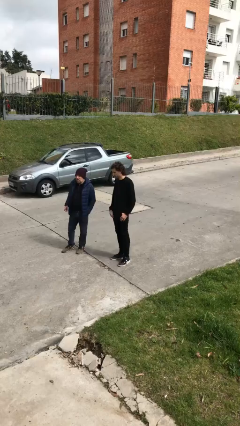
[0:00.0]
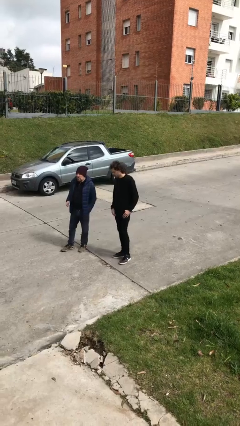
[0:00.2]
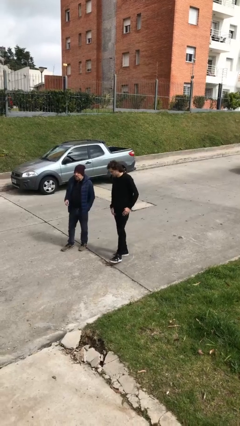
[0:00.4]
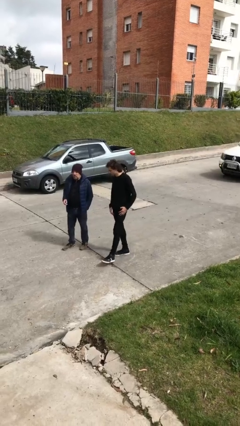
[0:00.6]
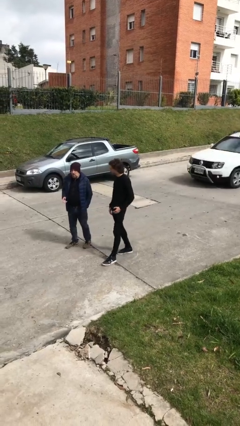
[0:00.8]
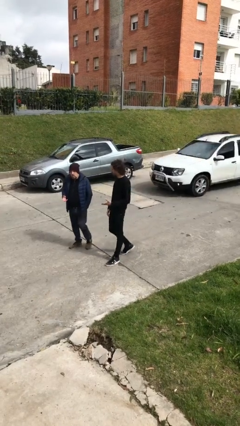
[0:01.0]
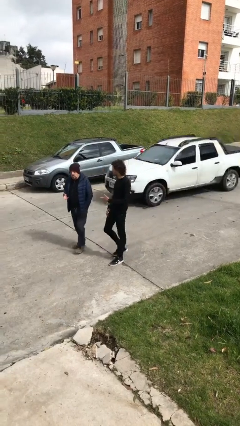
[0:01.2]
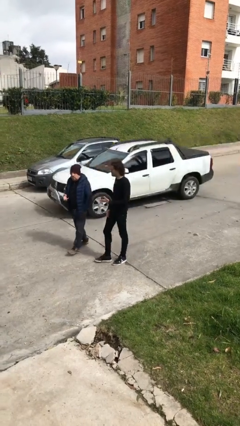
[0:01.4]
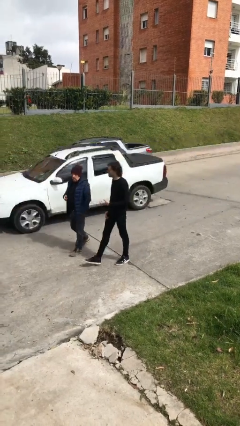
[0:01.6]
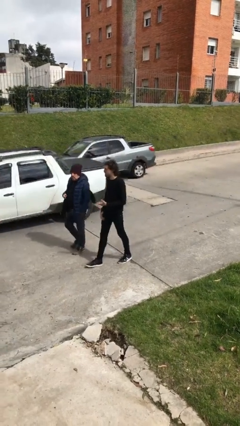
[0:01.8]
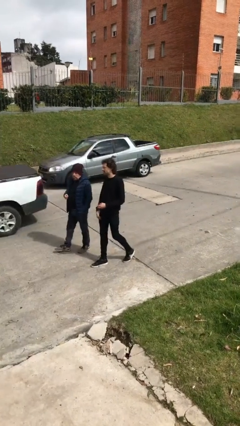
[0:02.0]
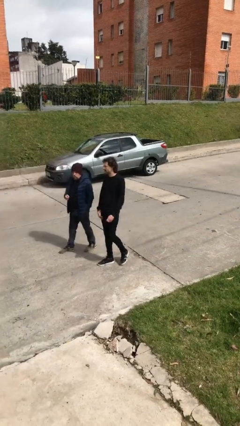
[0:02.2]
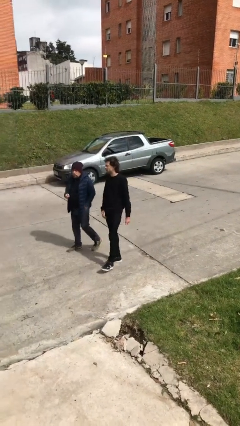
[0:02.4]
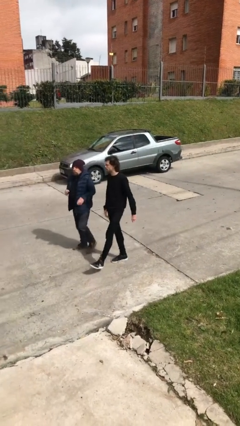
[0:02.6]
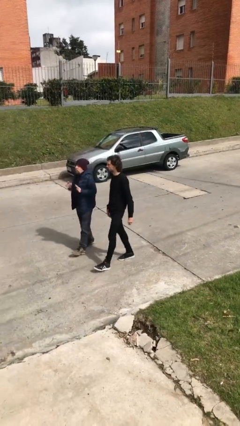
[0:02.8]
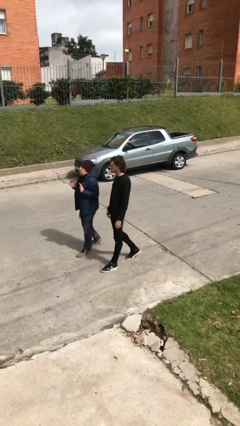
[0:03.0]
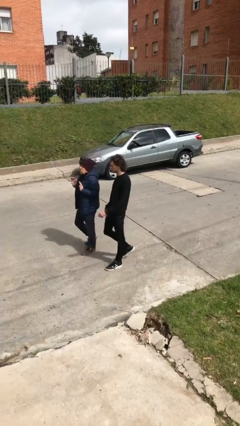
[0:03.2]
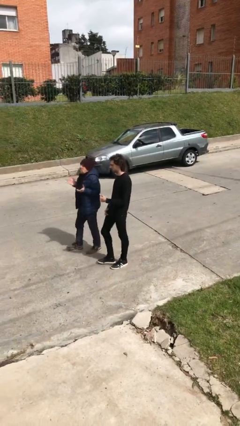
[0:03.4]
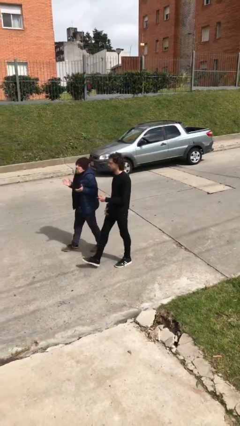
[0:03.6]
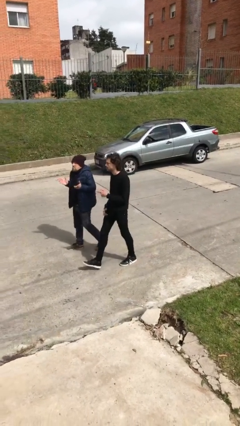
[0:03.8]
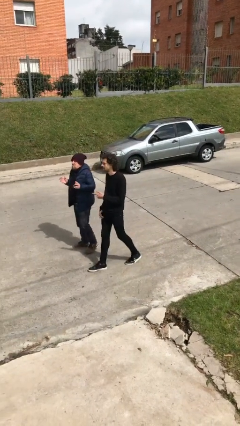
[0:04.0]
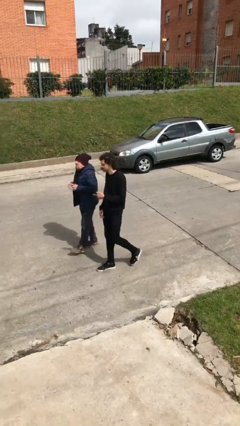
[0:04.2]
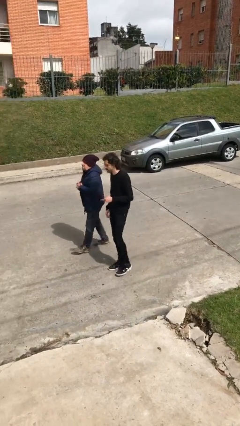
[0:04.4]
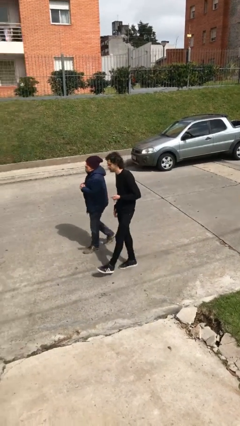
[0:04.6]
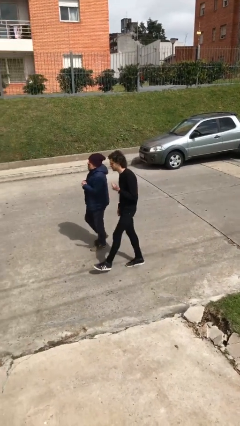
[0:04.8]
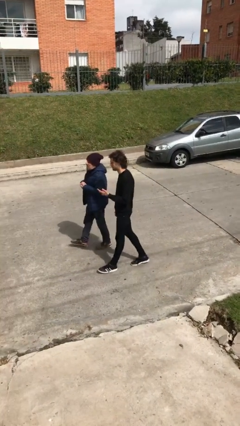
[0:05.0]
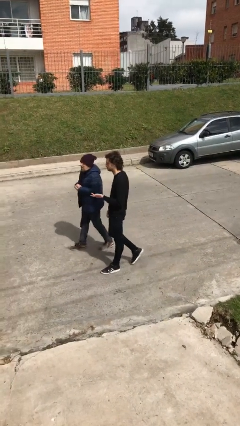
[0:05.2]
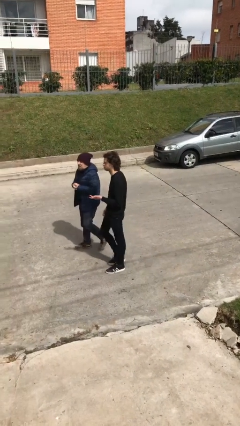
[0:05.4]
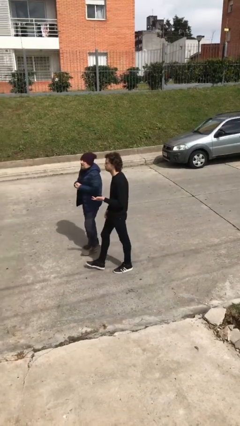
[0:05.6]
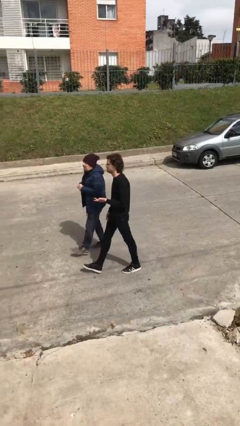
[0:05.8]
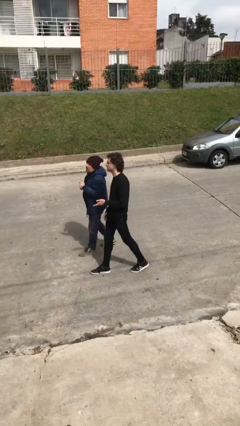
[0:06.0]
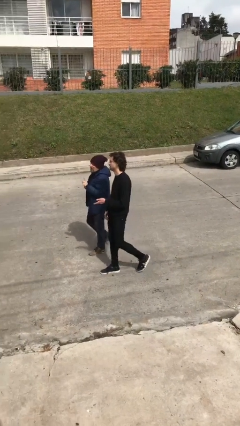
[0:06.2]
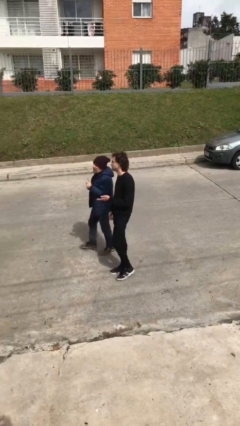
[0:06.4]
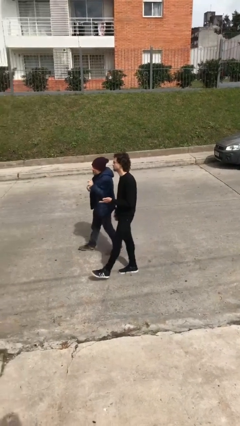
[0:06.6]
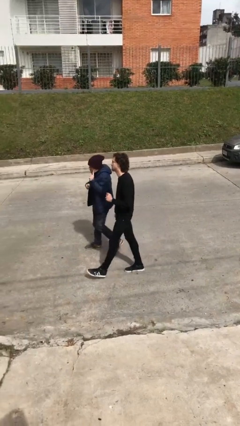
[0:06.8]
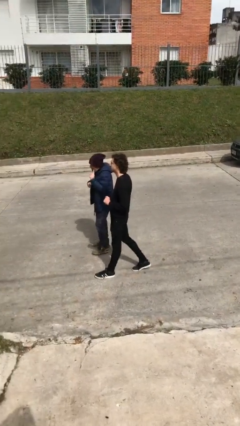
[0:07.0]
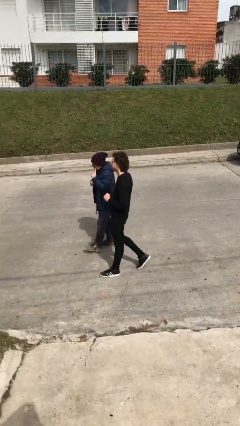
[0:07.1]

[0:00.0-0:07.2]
person talks to person

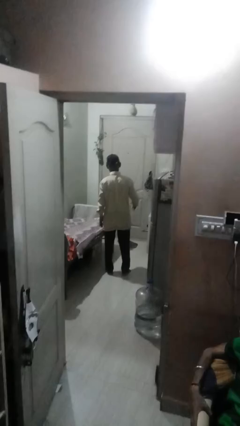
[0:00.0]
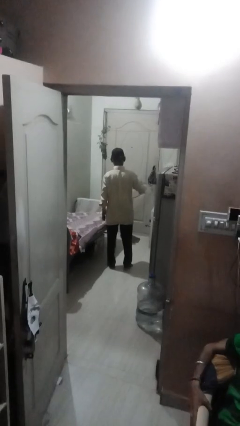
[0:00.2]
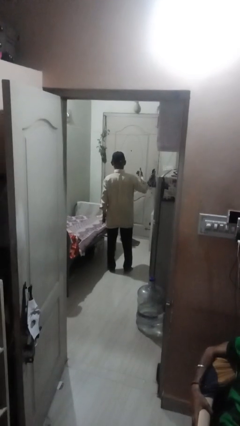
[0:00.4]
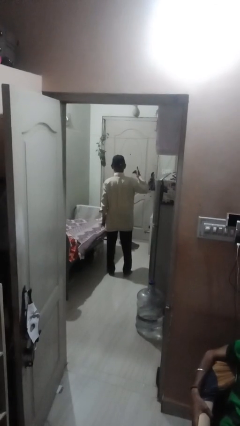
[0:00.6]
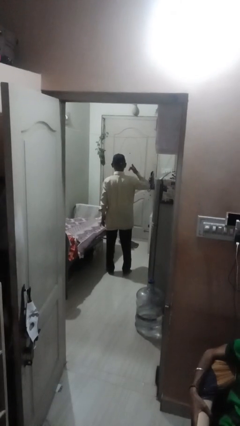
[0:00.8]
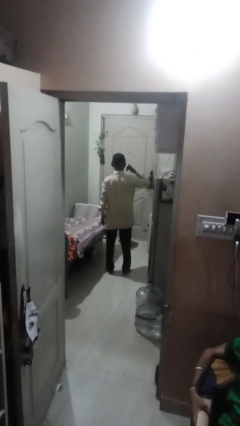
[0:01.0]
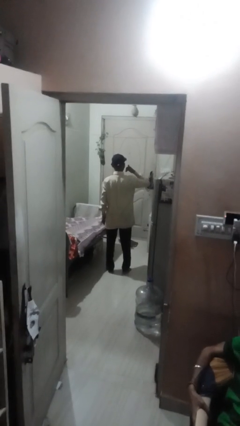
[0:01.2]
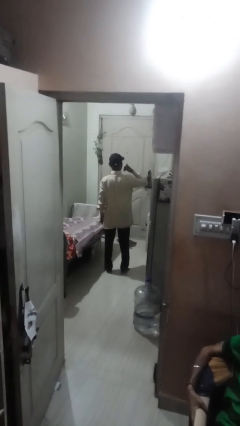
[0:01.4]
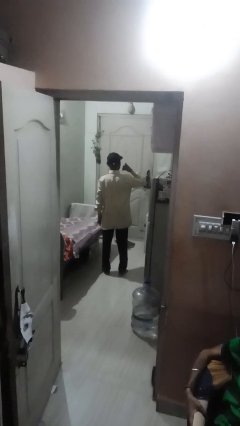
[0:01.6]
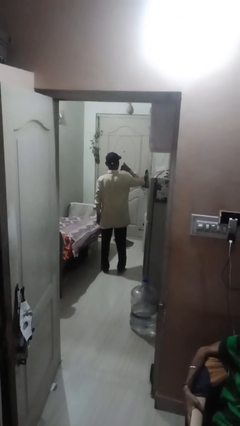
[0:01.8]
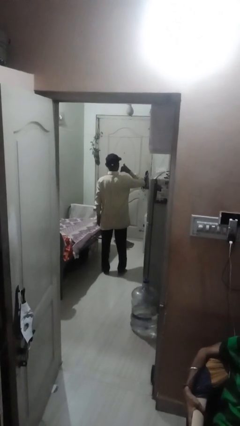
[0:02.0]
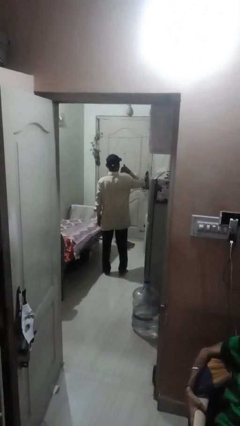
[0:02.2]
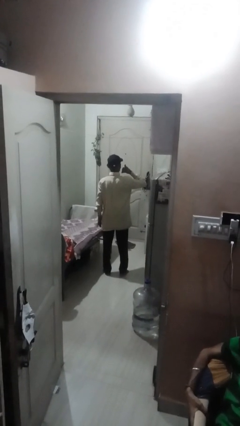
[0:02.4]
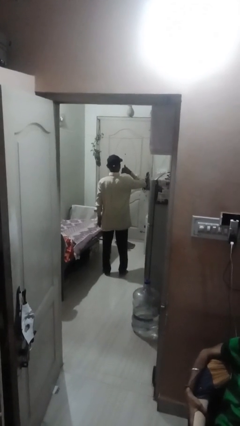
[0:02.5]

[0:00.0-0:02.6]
person gestures call me

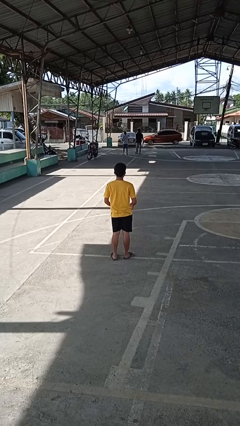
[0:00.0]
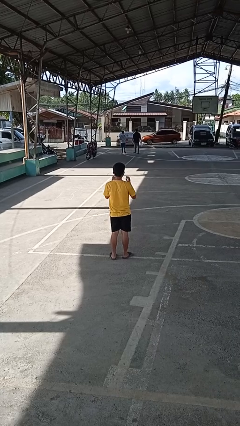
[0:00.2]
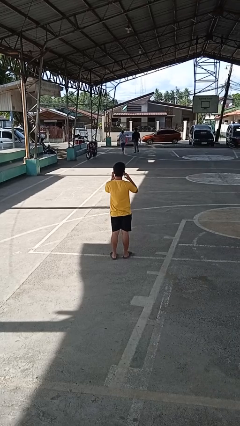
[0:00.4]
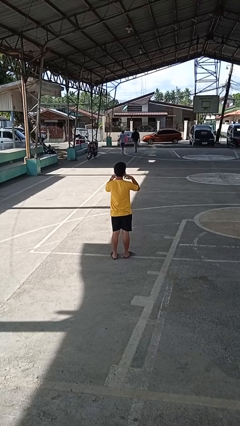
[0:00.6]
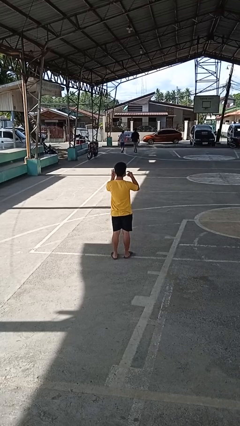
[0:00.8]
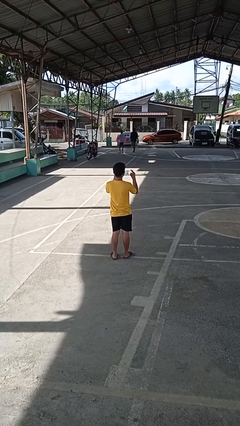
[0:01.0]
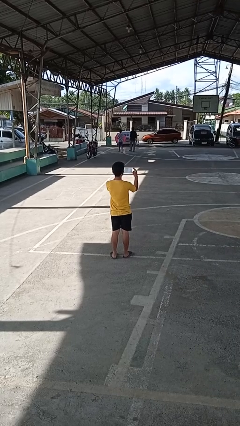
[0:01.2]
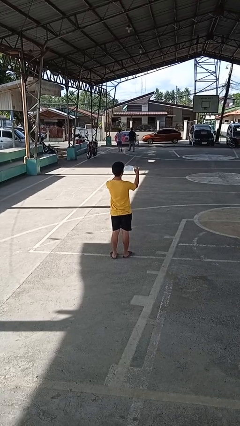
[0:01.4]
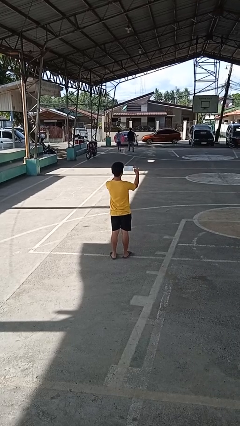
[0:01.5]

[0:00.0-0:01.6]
person takes off facemask

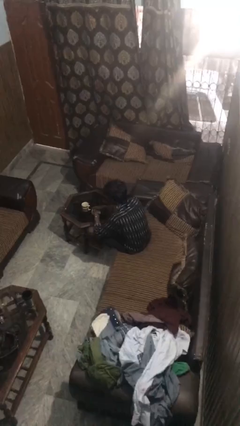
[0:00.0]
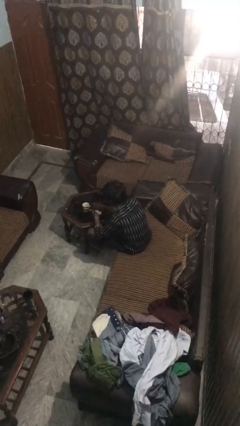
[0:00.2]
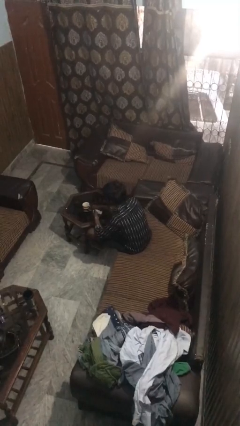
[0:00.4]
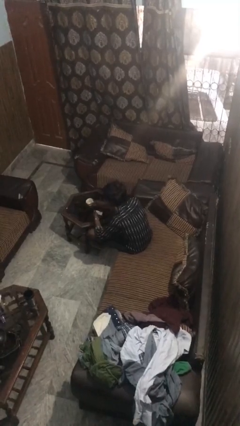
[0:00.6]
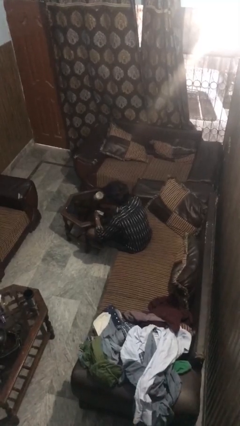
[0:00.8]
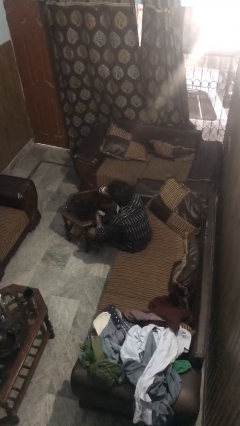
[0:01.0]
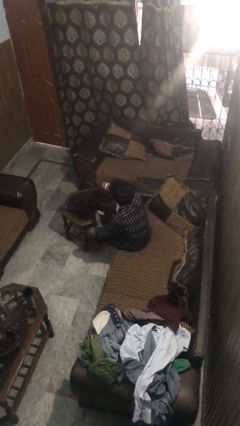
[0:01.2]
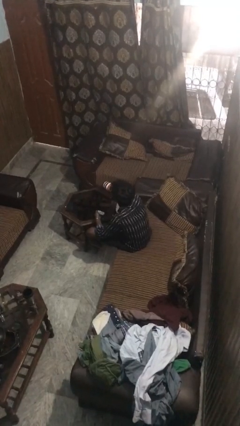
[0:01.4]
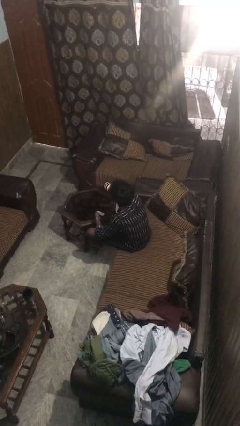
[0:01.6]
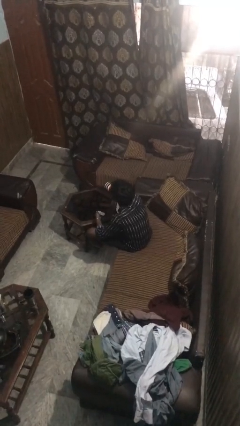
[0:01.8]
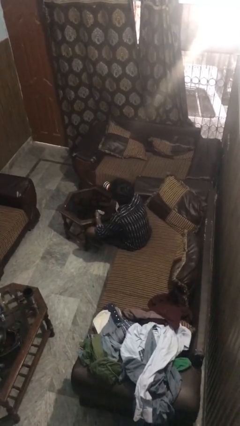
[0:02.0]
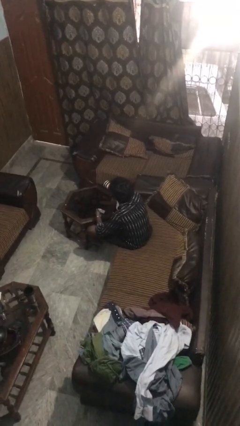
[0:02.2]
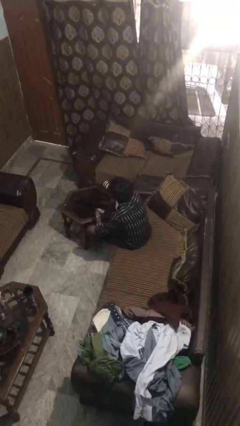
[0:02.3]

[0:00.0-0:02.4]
person drinks from cup

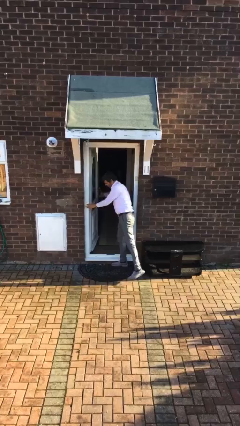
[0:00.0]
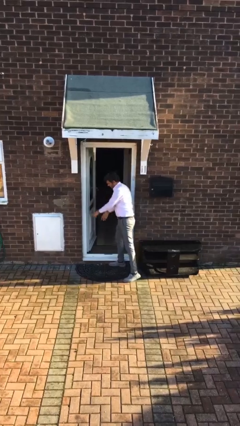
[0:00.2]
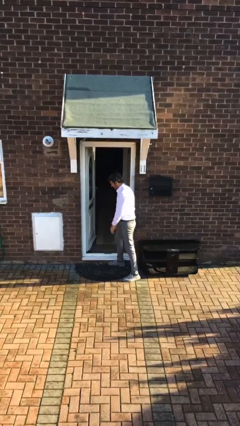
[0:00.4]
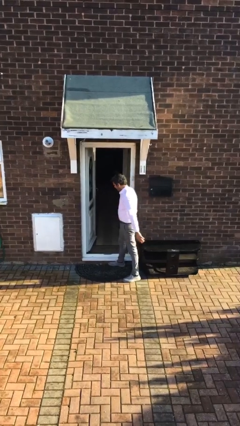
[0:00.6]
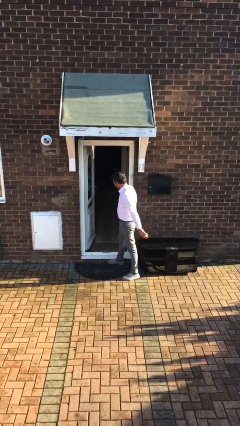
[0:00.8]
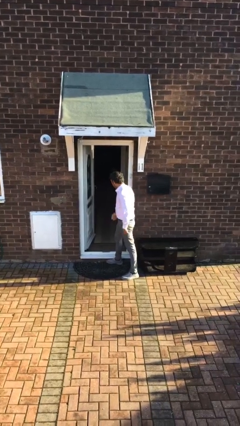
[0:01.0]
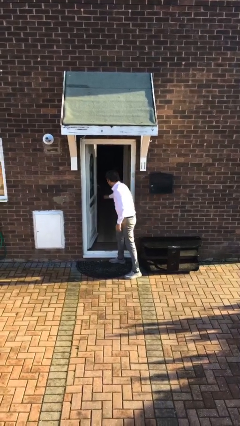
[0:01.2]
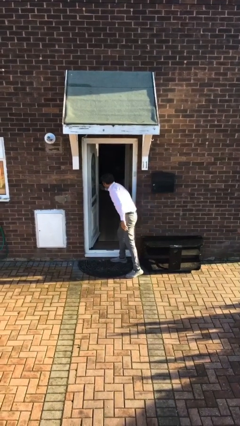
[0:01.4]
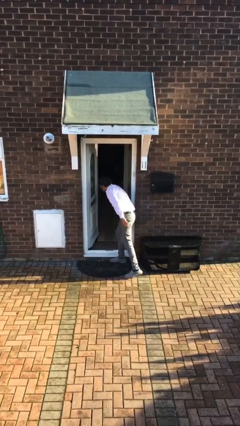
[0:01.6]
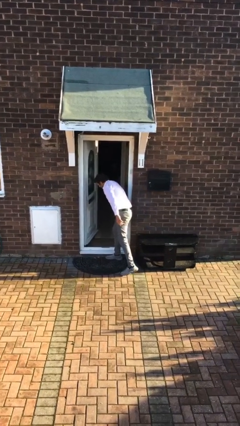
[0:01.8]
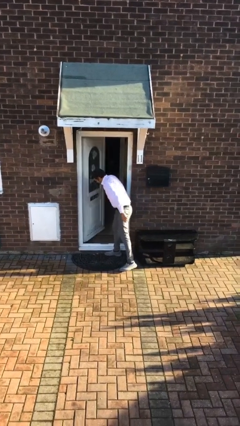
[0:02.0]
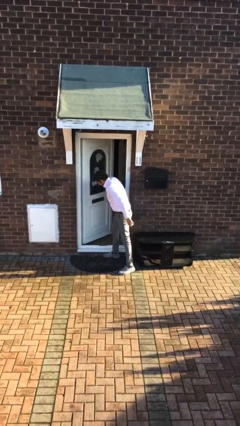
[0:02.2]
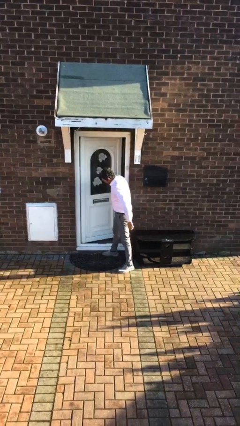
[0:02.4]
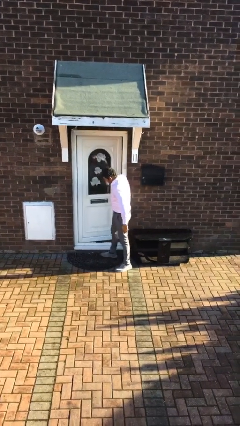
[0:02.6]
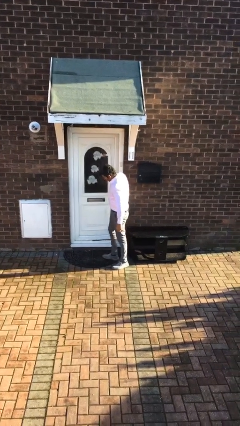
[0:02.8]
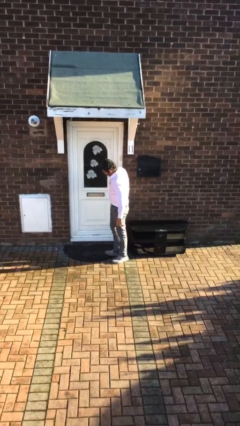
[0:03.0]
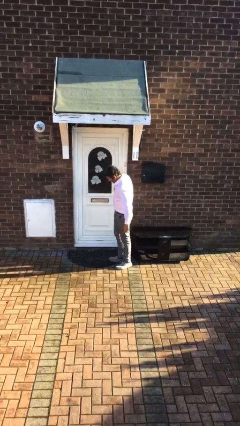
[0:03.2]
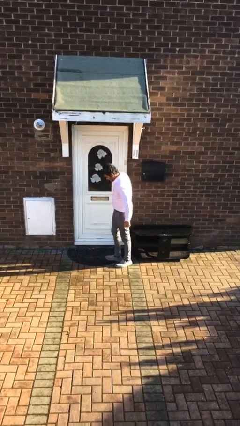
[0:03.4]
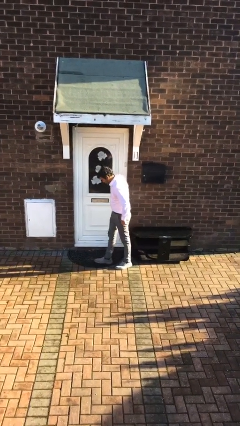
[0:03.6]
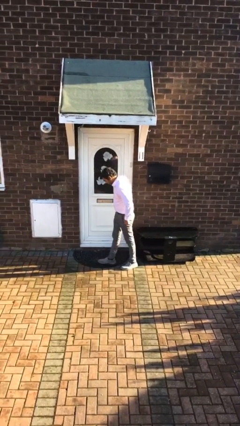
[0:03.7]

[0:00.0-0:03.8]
person closes facility door

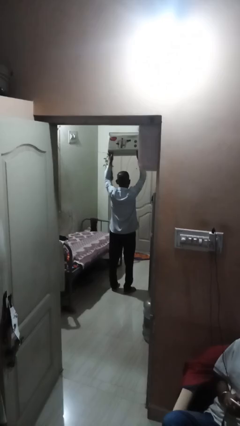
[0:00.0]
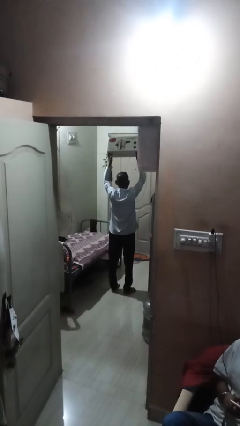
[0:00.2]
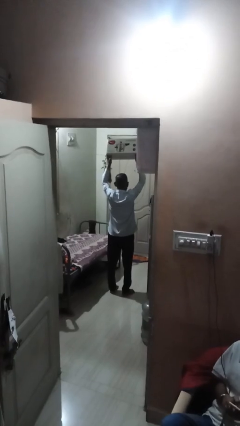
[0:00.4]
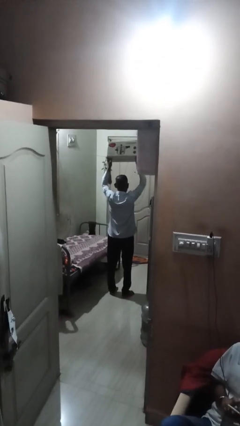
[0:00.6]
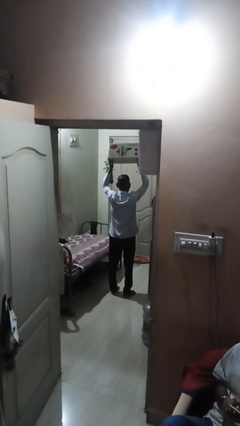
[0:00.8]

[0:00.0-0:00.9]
person holds object above head
